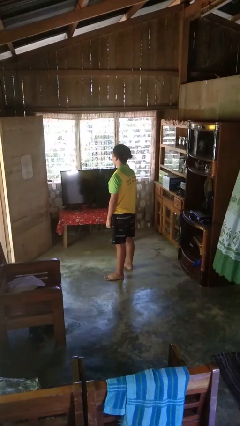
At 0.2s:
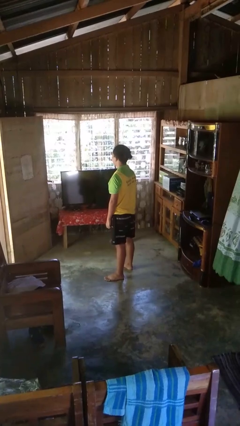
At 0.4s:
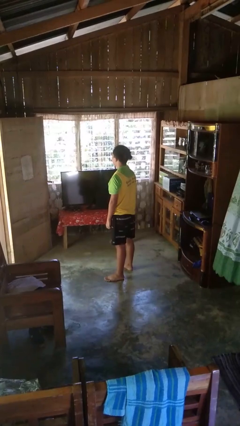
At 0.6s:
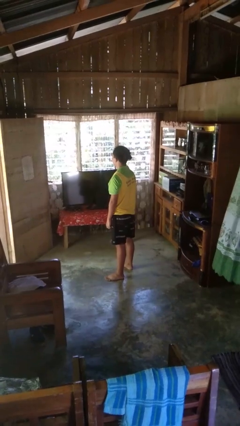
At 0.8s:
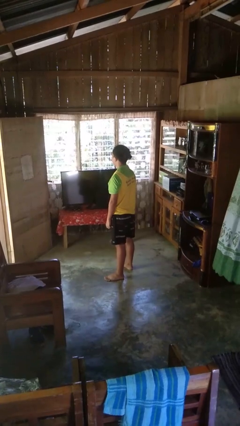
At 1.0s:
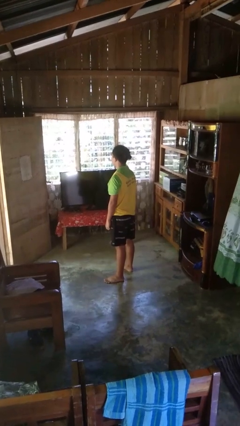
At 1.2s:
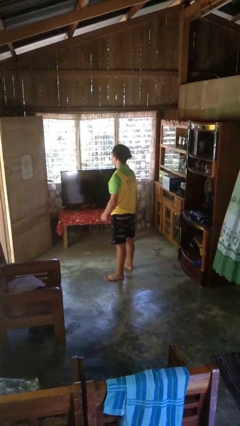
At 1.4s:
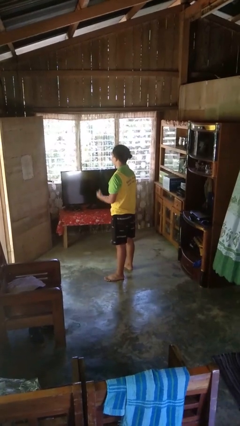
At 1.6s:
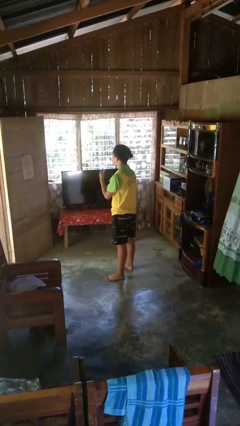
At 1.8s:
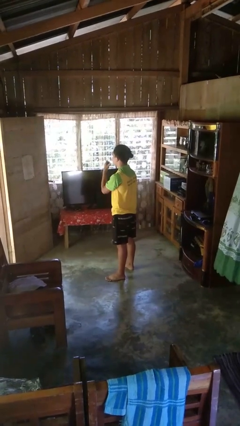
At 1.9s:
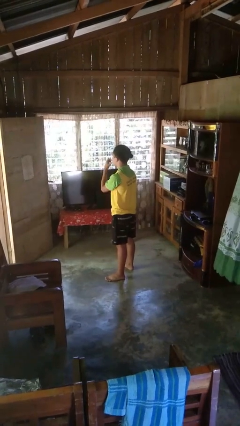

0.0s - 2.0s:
person licks fingers

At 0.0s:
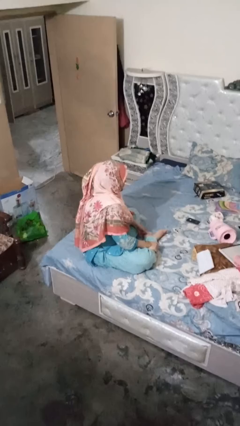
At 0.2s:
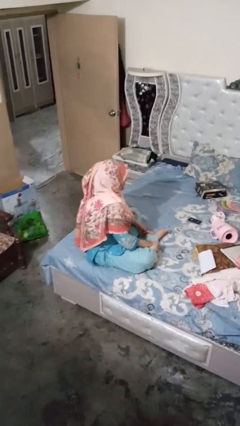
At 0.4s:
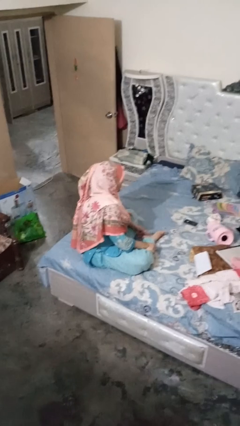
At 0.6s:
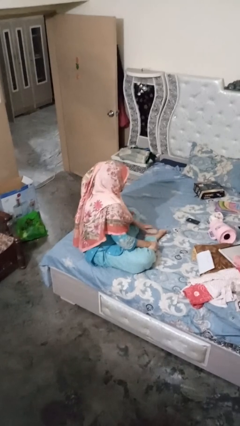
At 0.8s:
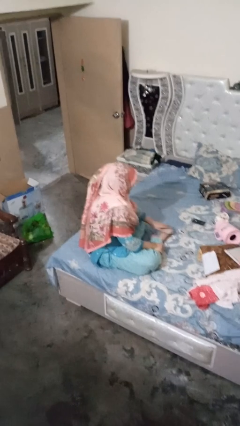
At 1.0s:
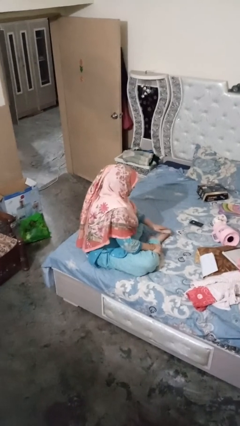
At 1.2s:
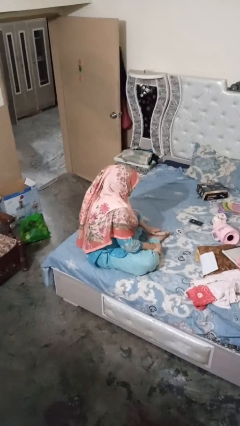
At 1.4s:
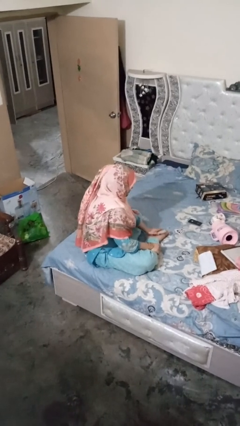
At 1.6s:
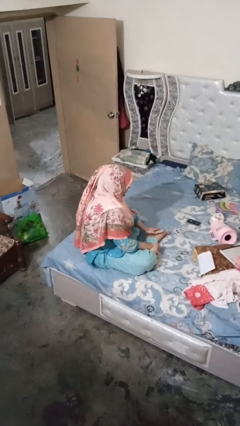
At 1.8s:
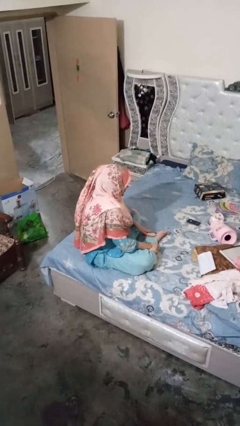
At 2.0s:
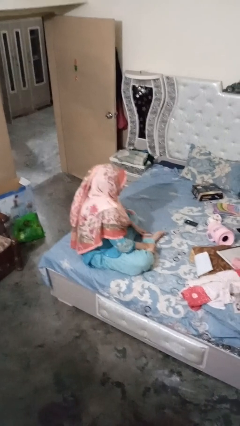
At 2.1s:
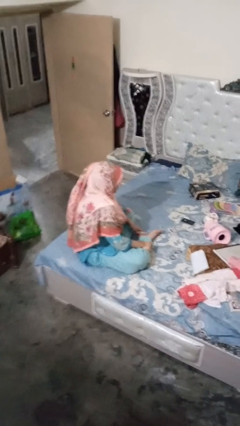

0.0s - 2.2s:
person rubs foot

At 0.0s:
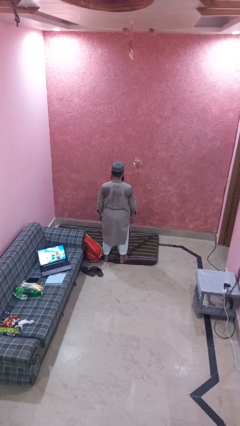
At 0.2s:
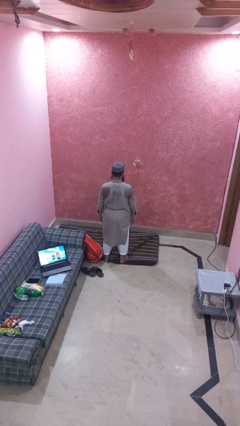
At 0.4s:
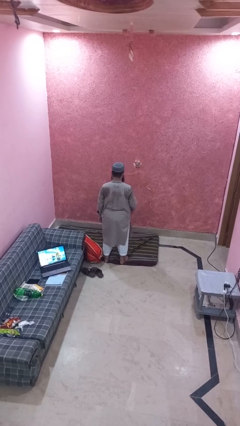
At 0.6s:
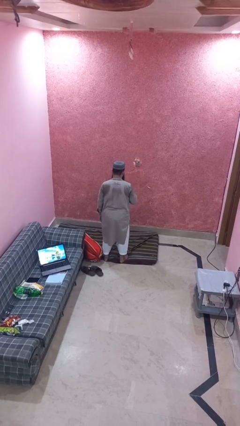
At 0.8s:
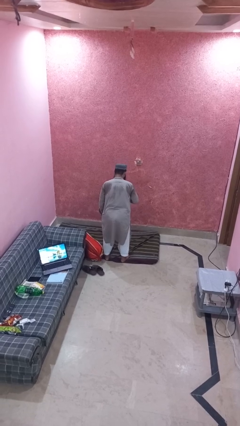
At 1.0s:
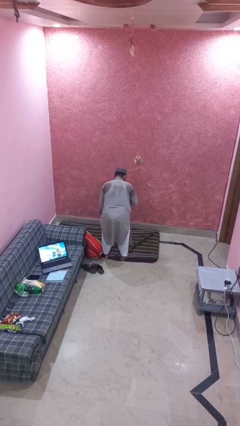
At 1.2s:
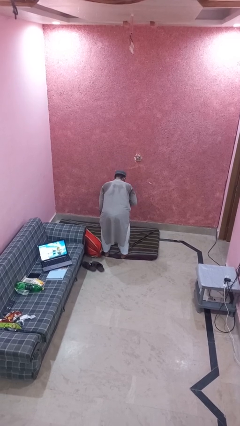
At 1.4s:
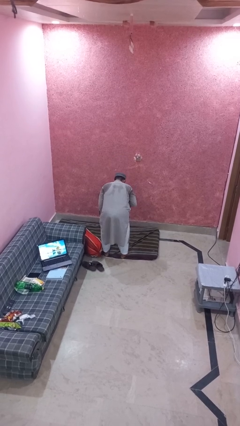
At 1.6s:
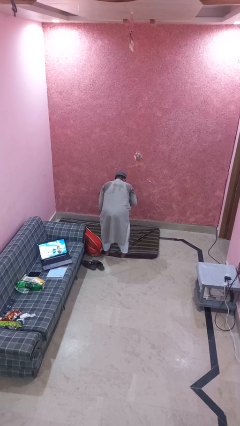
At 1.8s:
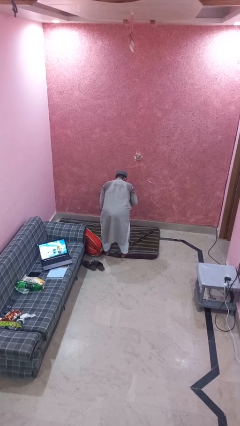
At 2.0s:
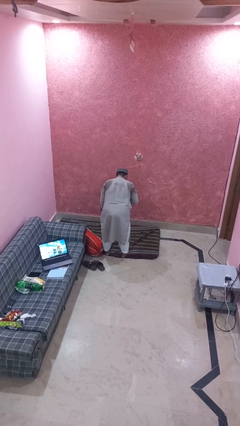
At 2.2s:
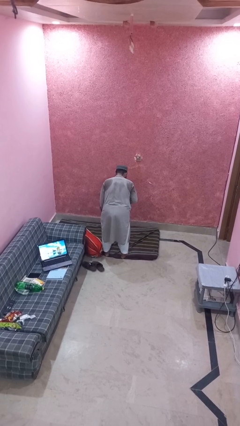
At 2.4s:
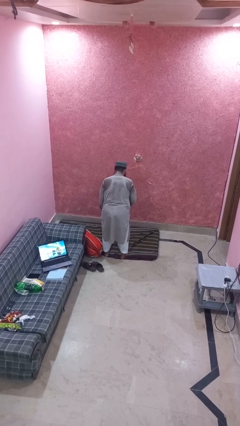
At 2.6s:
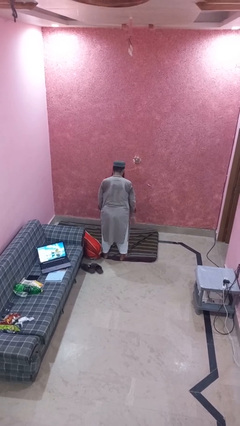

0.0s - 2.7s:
person bows

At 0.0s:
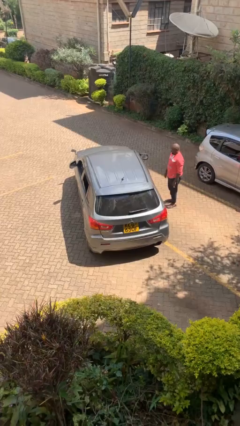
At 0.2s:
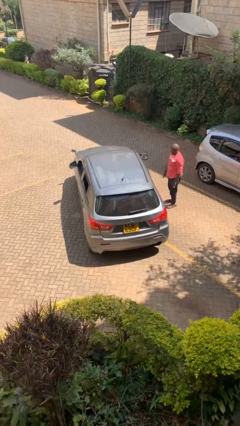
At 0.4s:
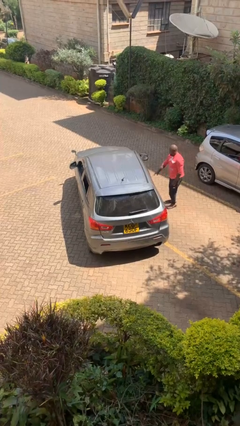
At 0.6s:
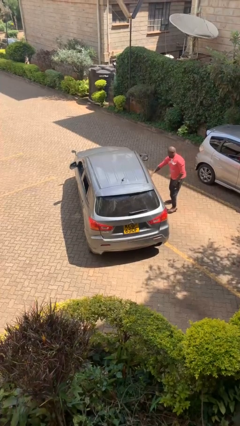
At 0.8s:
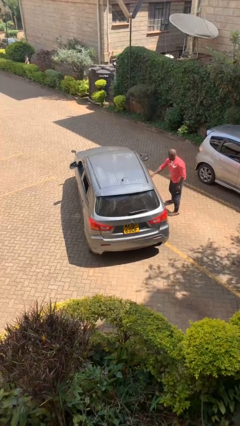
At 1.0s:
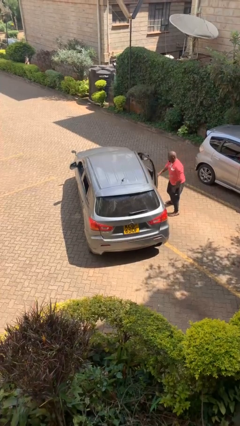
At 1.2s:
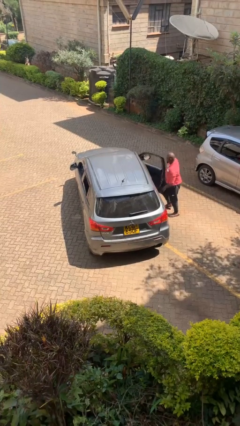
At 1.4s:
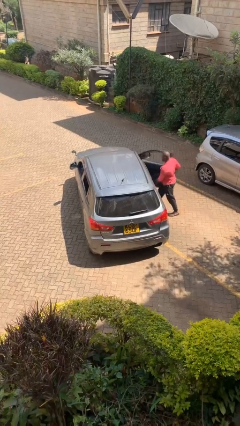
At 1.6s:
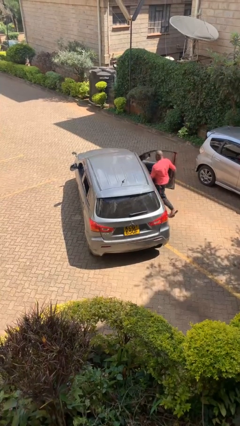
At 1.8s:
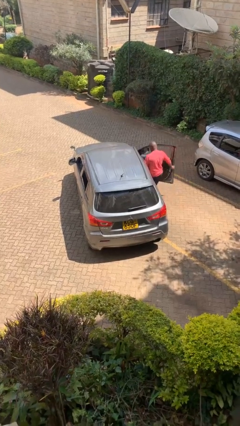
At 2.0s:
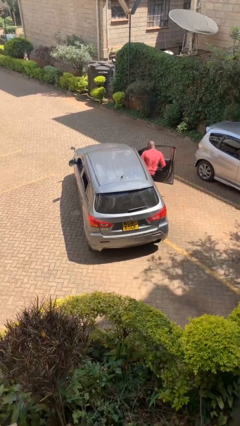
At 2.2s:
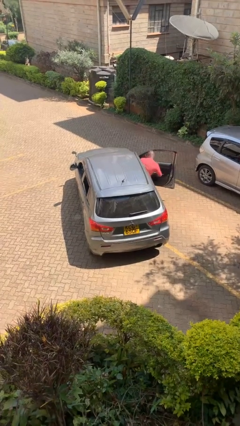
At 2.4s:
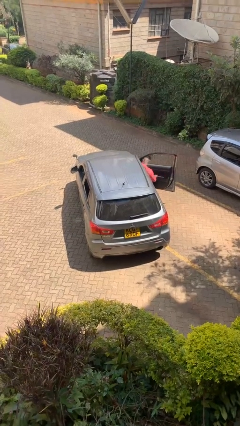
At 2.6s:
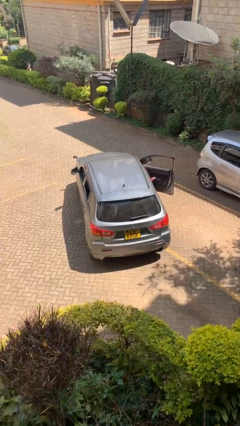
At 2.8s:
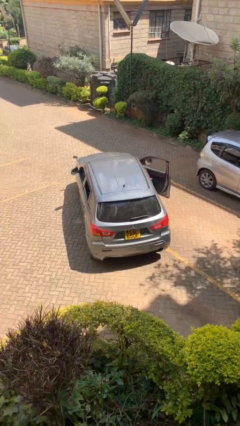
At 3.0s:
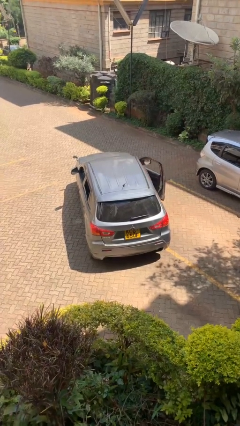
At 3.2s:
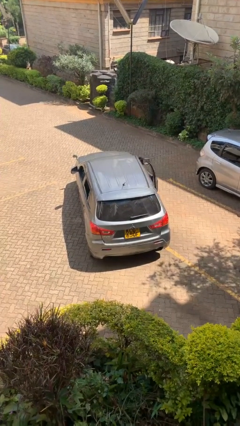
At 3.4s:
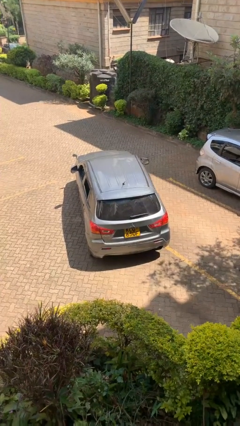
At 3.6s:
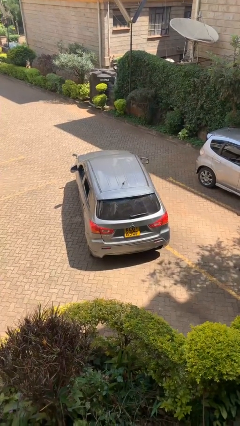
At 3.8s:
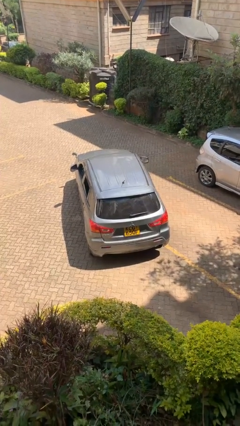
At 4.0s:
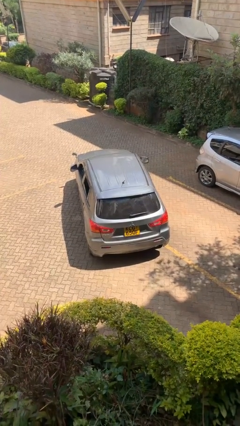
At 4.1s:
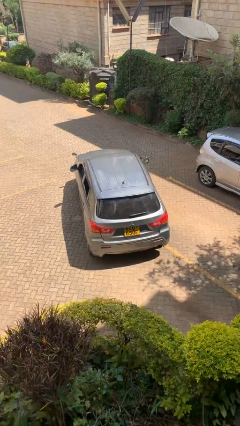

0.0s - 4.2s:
car picks up person

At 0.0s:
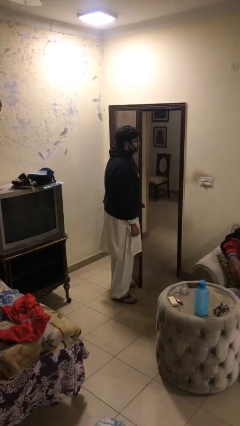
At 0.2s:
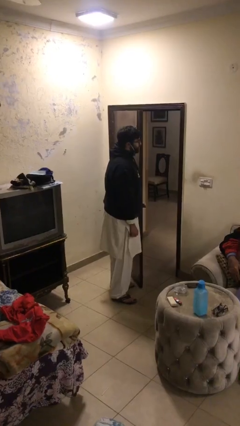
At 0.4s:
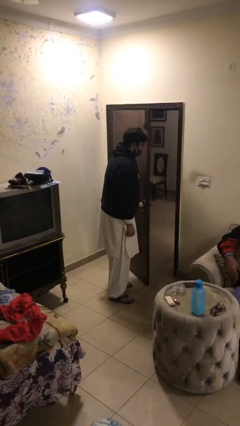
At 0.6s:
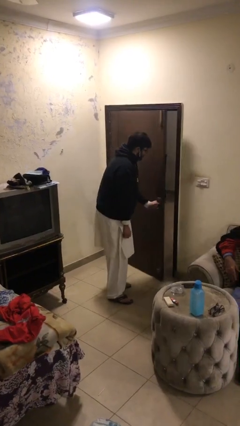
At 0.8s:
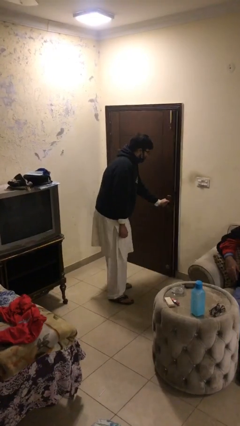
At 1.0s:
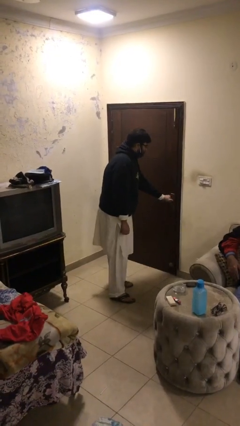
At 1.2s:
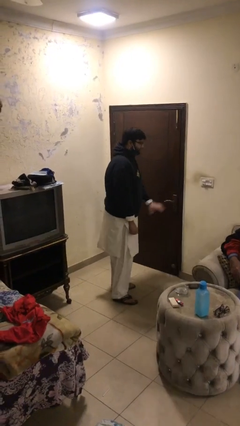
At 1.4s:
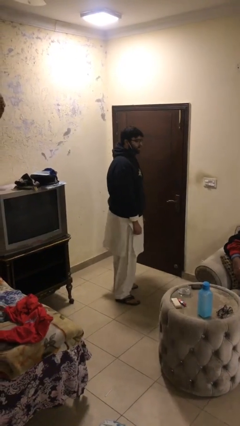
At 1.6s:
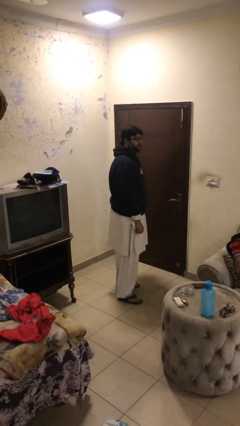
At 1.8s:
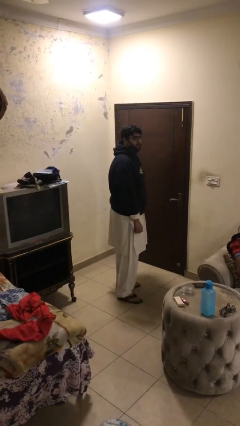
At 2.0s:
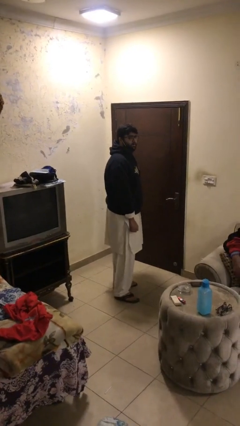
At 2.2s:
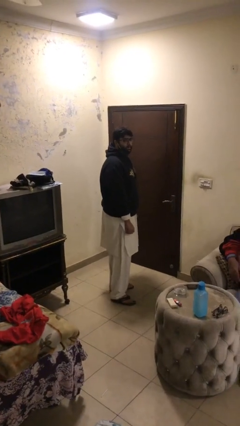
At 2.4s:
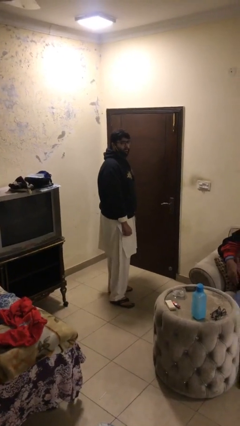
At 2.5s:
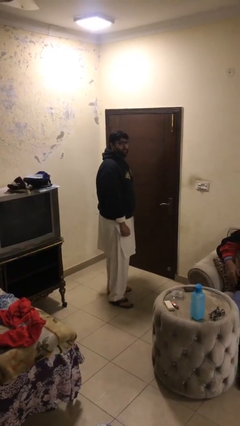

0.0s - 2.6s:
person closes facility door

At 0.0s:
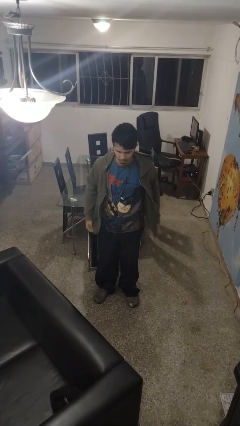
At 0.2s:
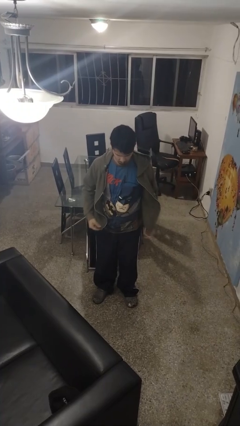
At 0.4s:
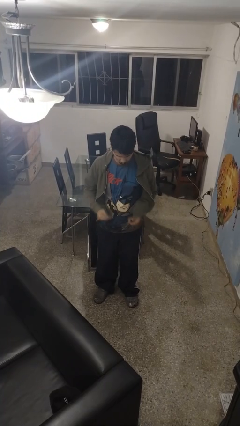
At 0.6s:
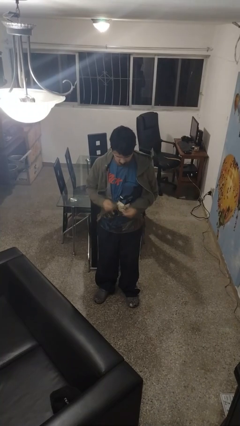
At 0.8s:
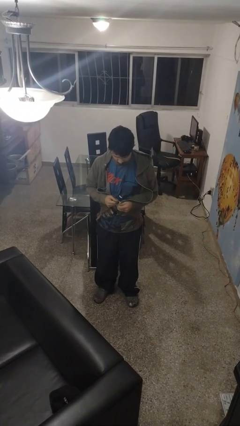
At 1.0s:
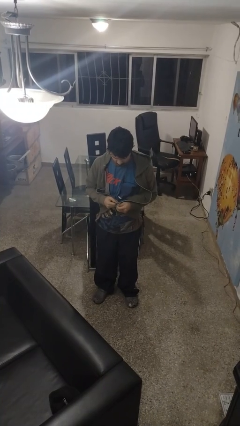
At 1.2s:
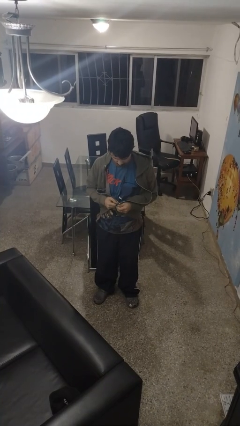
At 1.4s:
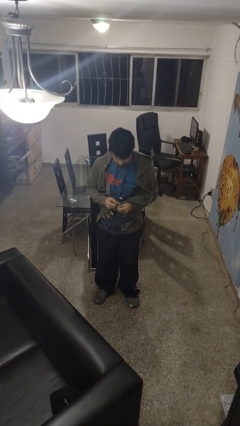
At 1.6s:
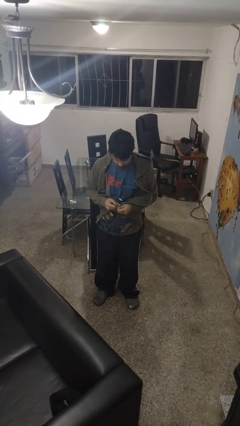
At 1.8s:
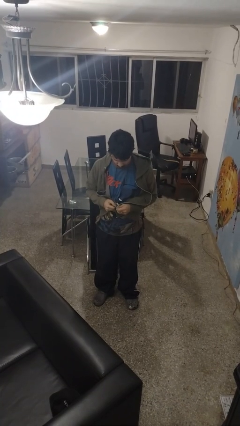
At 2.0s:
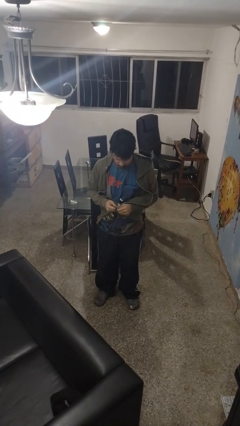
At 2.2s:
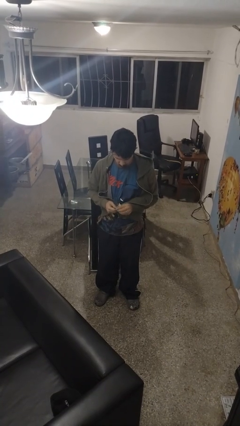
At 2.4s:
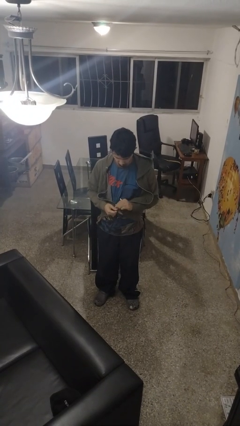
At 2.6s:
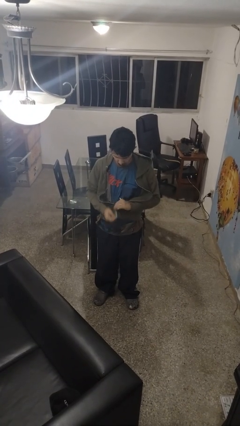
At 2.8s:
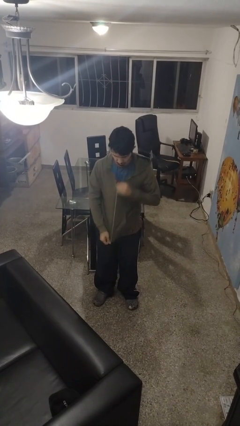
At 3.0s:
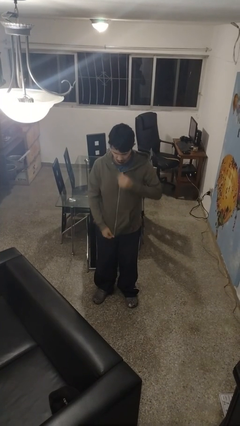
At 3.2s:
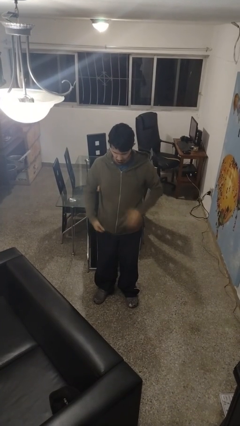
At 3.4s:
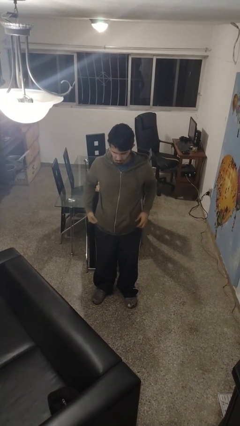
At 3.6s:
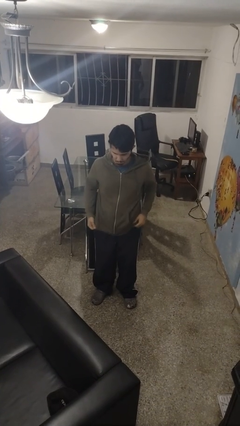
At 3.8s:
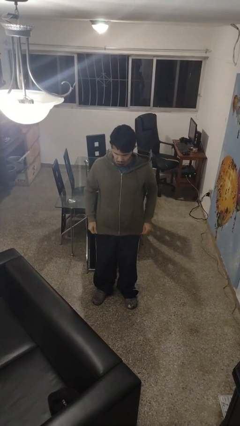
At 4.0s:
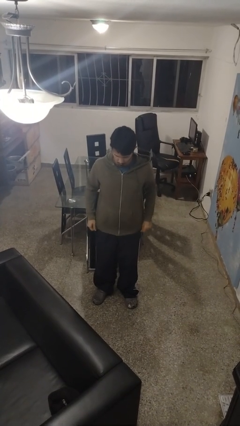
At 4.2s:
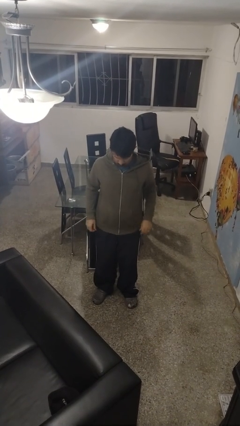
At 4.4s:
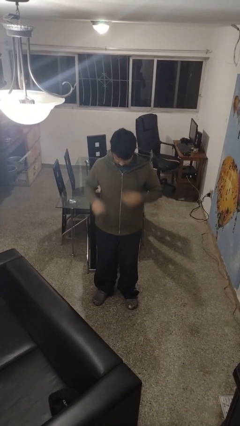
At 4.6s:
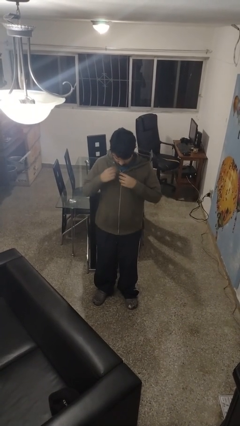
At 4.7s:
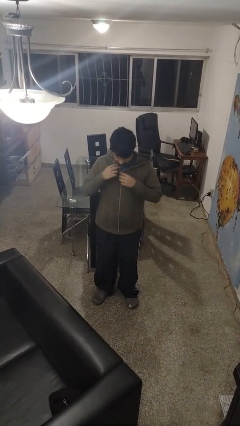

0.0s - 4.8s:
person zips up jacket
